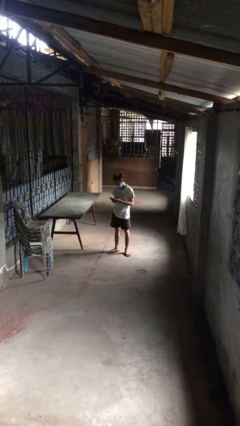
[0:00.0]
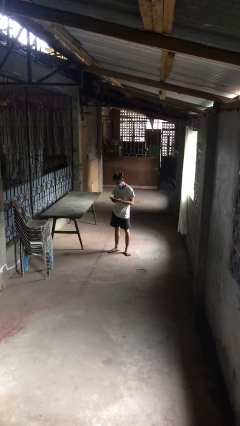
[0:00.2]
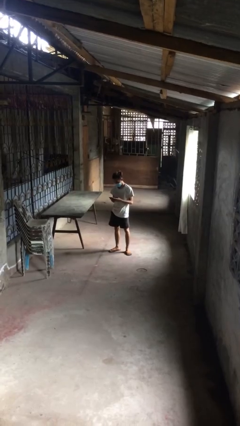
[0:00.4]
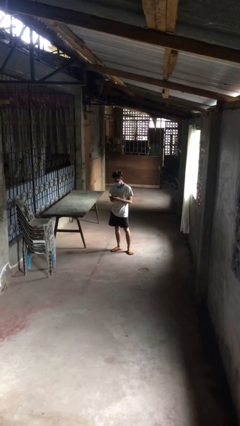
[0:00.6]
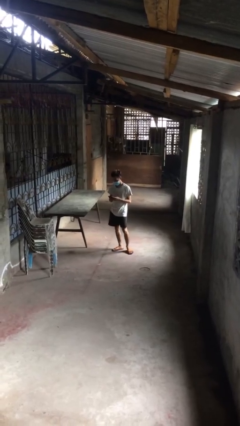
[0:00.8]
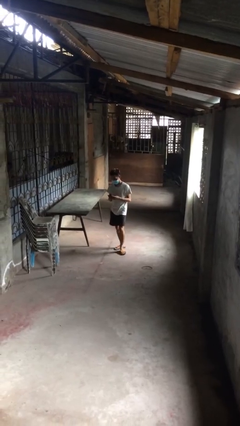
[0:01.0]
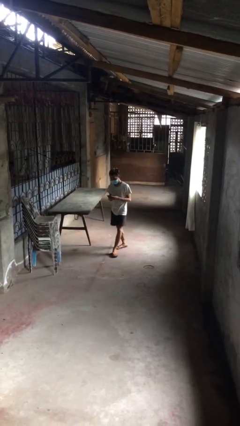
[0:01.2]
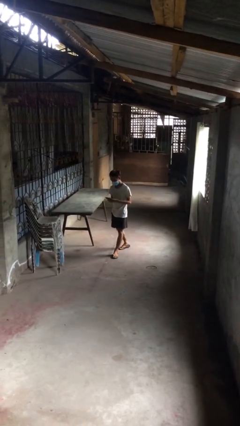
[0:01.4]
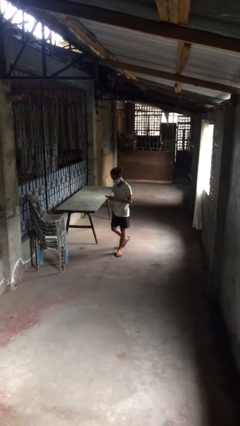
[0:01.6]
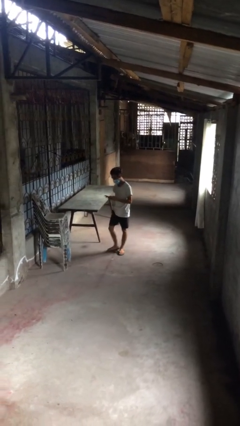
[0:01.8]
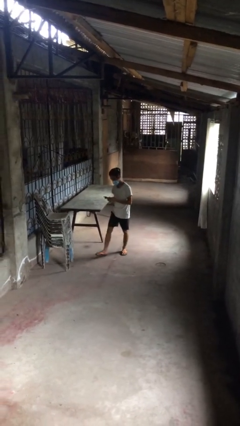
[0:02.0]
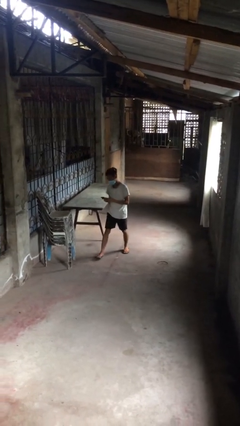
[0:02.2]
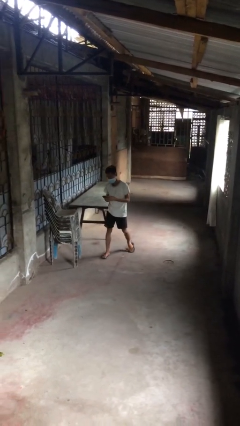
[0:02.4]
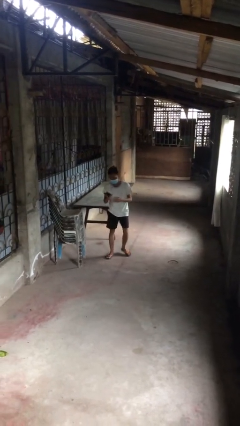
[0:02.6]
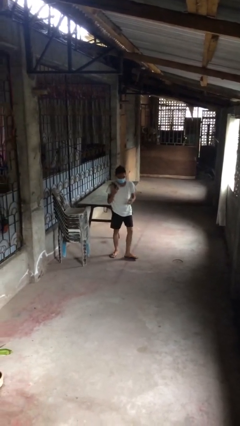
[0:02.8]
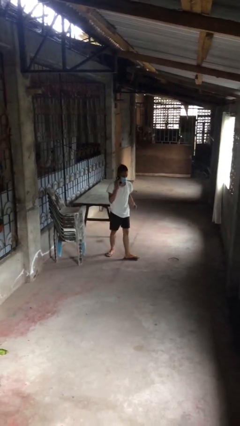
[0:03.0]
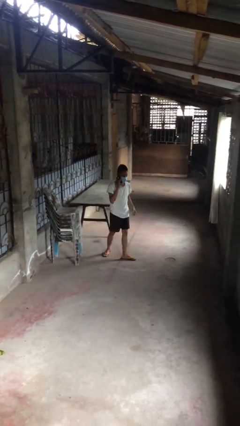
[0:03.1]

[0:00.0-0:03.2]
person texts on phone

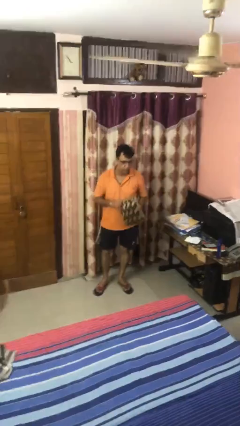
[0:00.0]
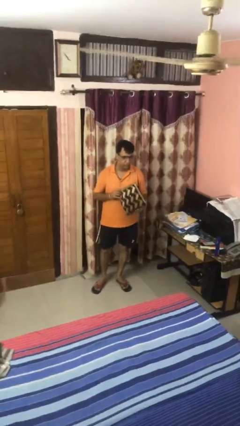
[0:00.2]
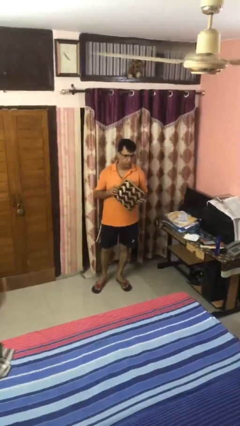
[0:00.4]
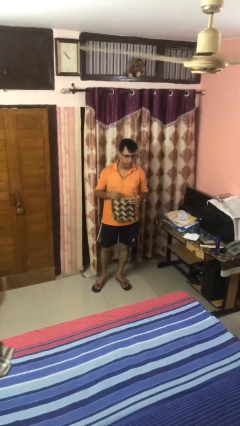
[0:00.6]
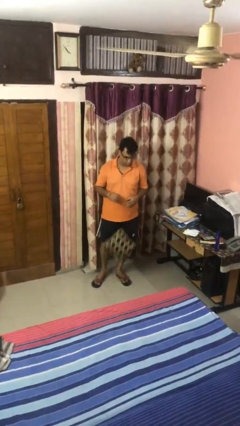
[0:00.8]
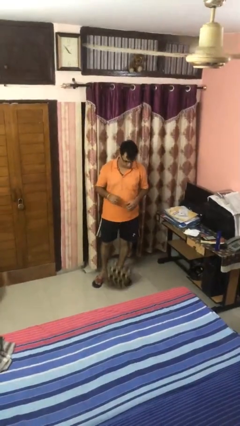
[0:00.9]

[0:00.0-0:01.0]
person drops object

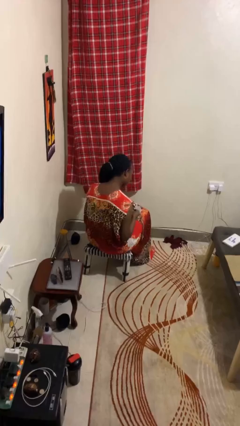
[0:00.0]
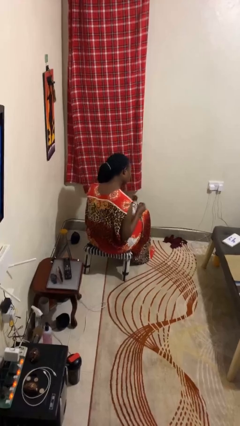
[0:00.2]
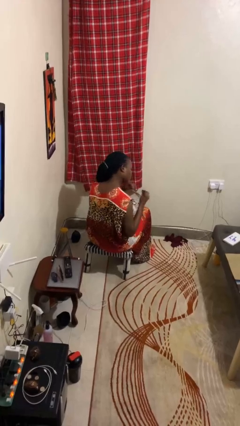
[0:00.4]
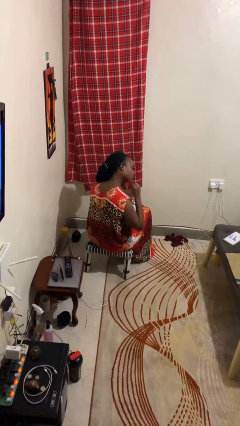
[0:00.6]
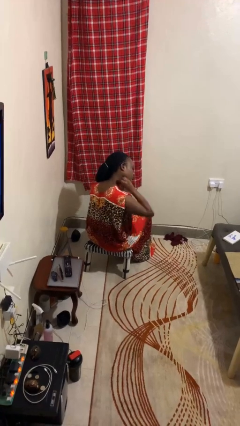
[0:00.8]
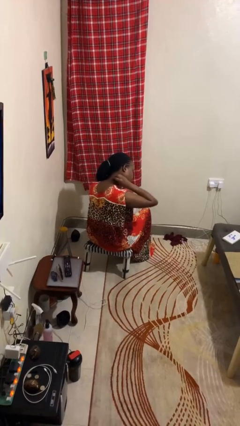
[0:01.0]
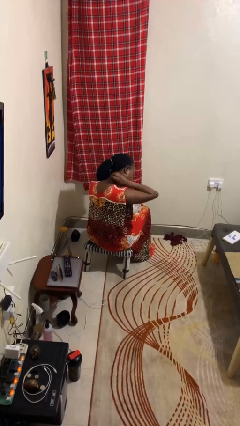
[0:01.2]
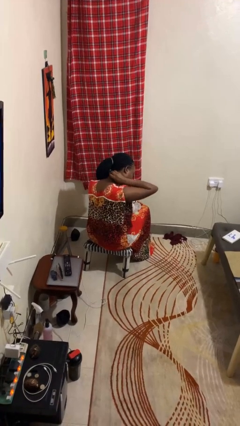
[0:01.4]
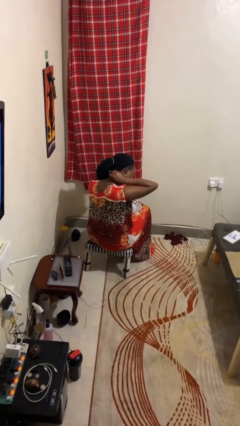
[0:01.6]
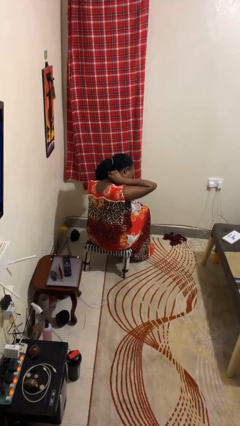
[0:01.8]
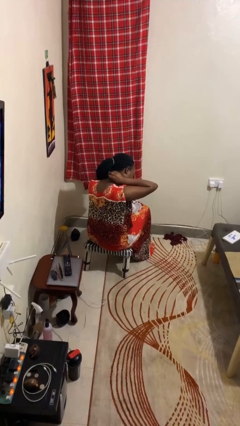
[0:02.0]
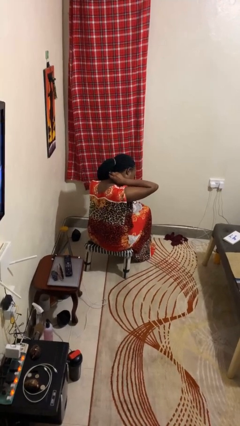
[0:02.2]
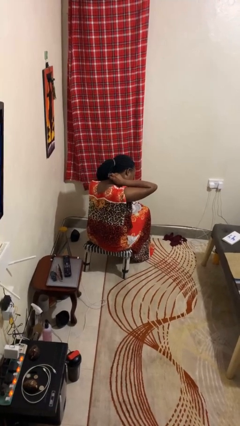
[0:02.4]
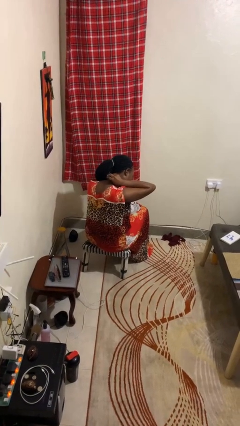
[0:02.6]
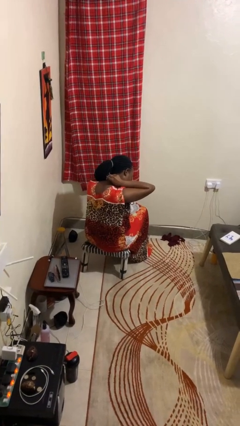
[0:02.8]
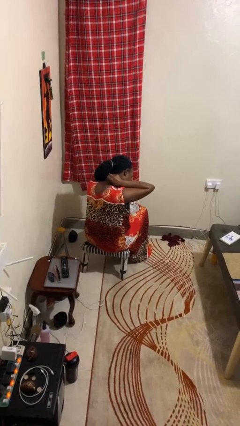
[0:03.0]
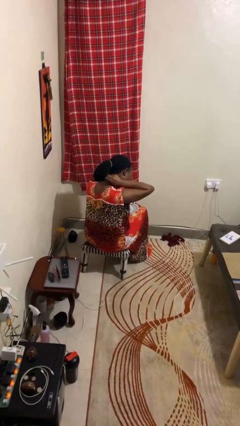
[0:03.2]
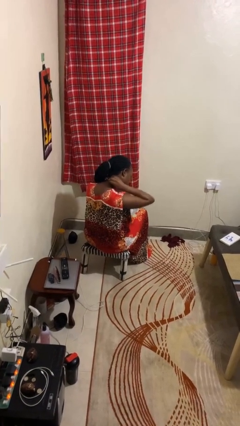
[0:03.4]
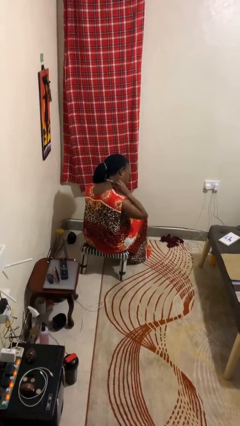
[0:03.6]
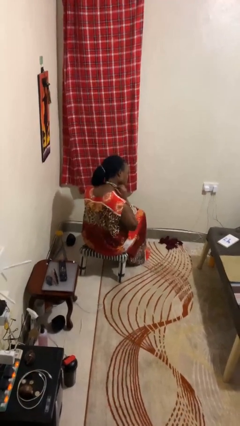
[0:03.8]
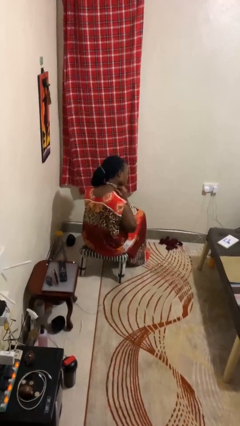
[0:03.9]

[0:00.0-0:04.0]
person puts on necklace

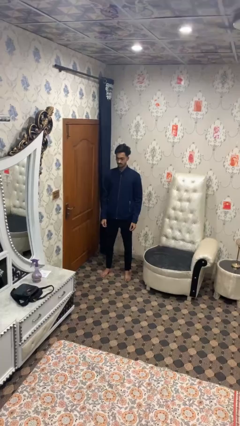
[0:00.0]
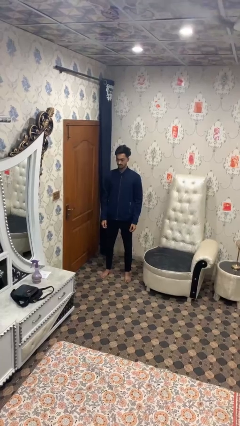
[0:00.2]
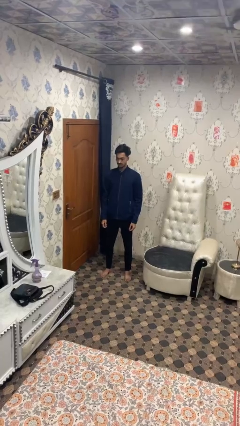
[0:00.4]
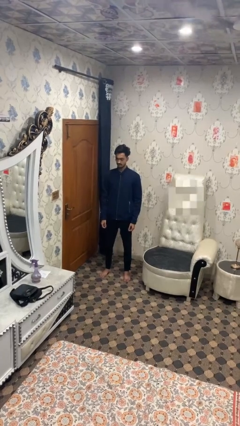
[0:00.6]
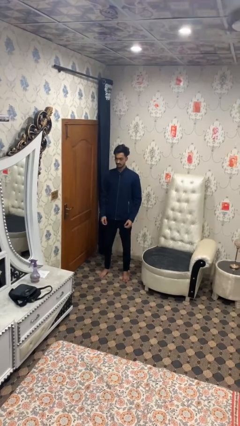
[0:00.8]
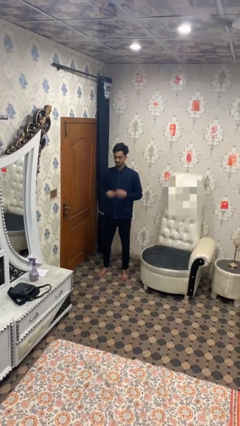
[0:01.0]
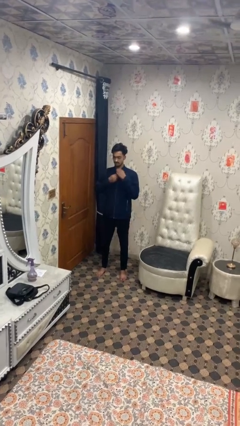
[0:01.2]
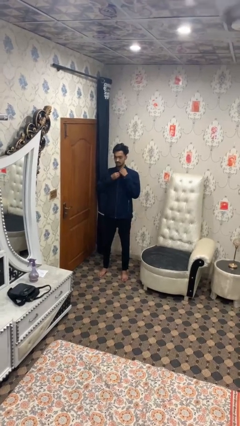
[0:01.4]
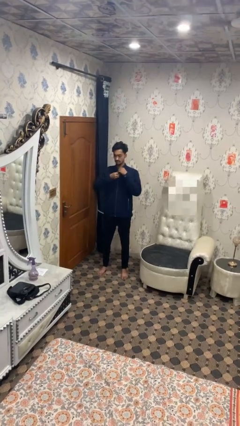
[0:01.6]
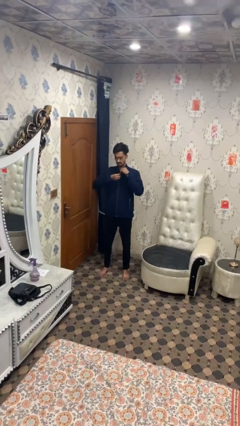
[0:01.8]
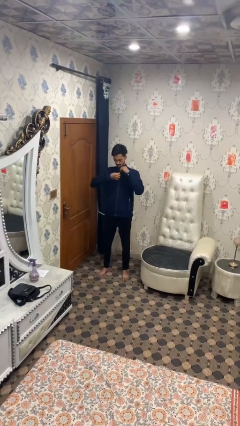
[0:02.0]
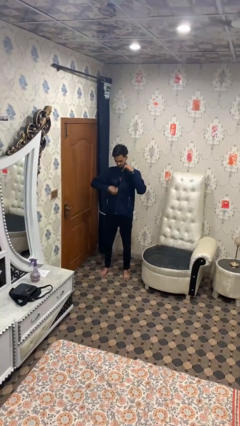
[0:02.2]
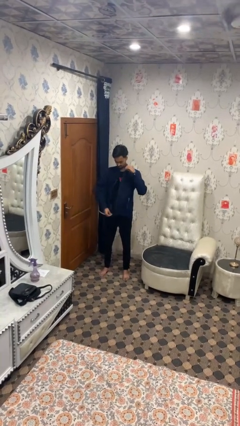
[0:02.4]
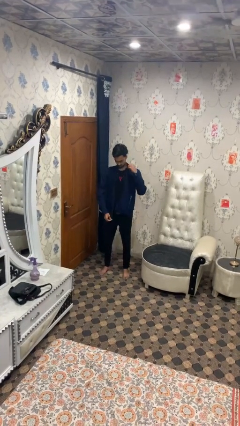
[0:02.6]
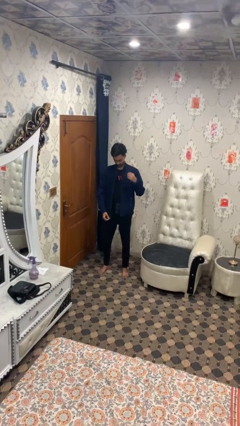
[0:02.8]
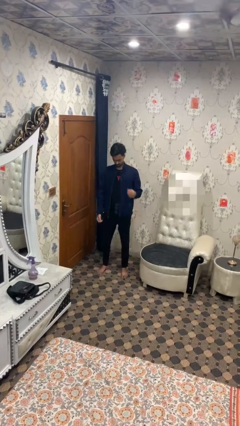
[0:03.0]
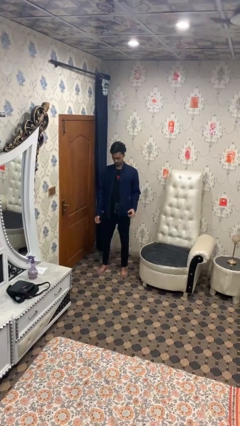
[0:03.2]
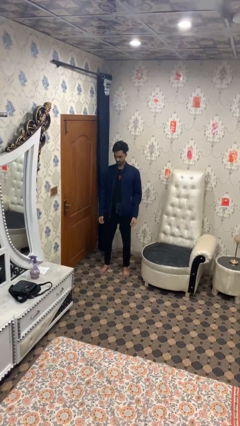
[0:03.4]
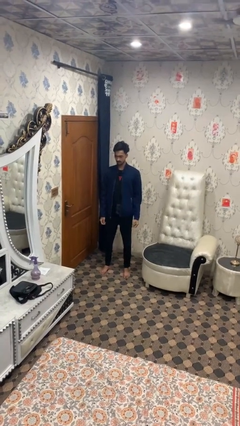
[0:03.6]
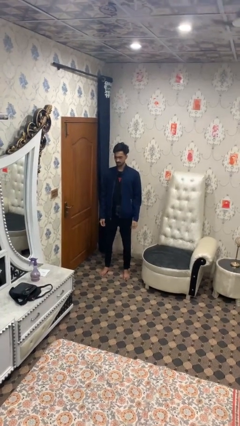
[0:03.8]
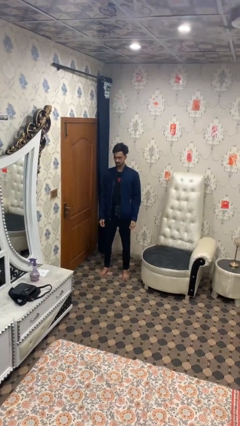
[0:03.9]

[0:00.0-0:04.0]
person unzips jacket

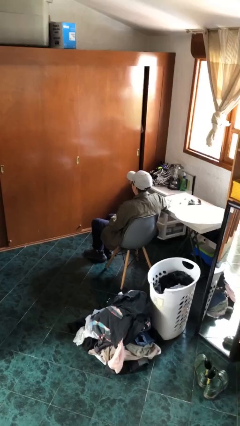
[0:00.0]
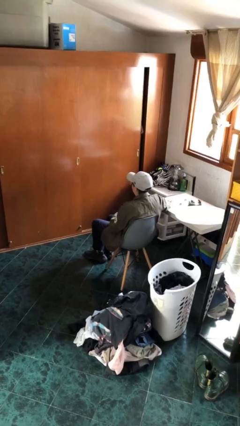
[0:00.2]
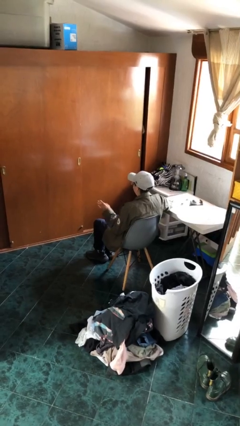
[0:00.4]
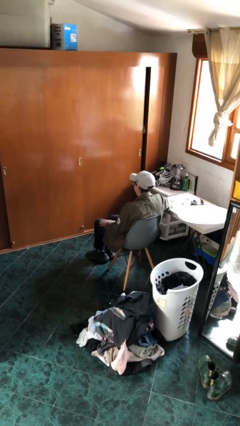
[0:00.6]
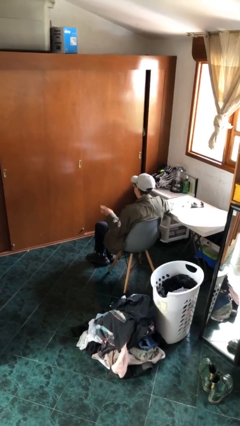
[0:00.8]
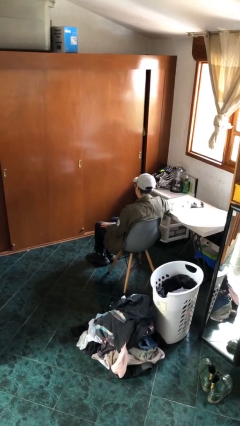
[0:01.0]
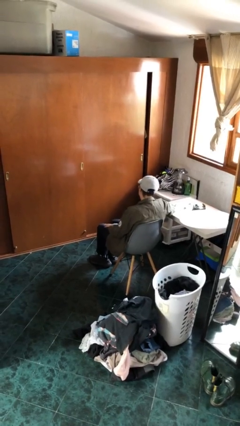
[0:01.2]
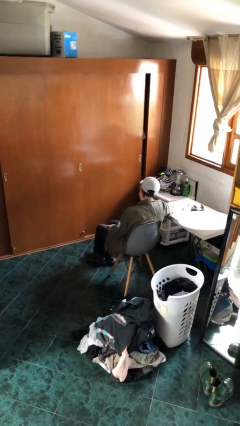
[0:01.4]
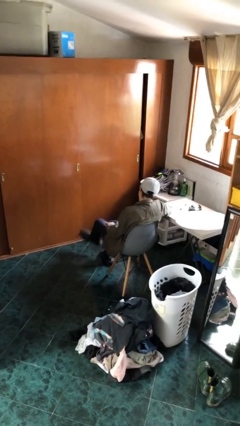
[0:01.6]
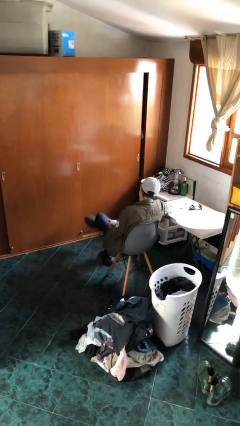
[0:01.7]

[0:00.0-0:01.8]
person slaps hands on thighs

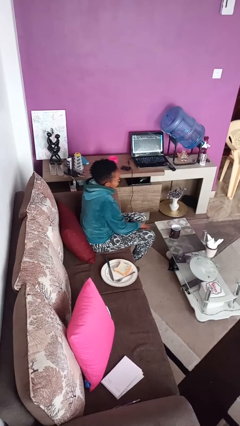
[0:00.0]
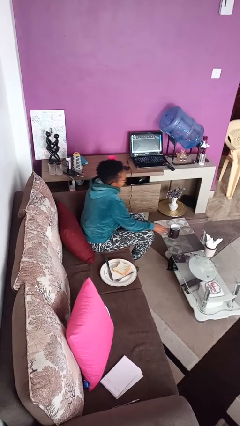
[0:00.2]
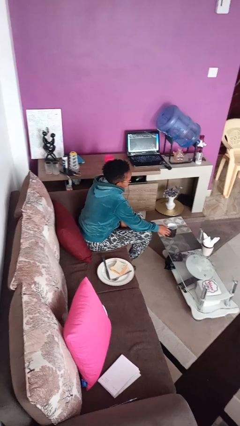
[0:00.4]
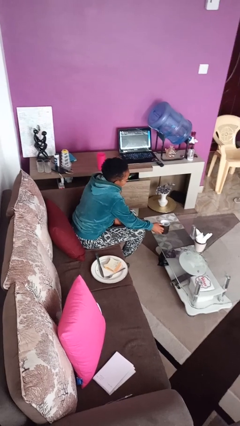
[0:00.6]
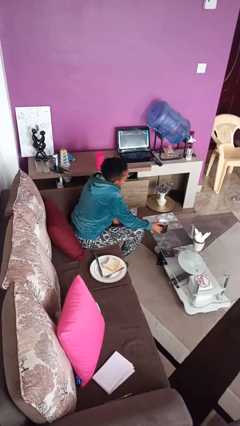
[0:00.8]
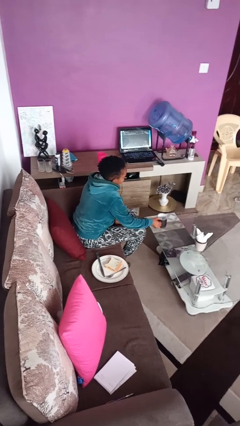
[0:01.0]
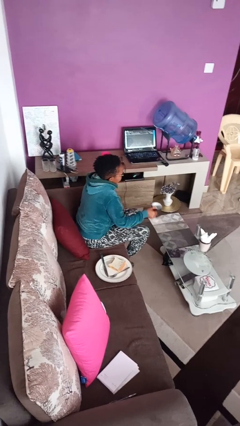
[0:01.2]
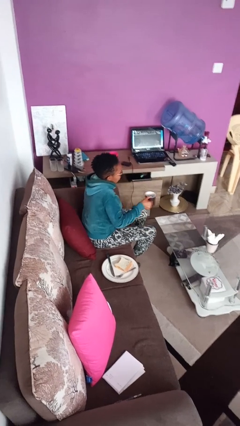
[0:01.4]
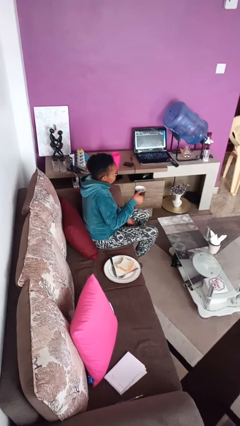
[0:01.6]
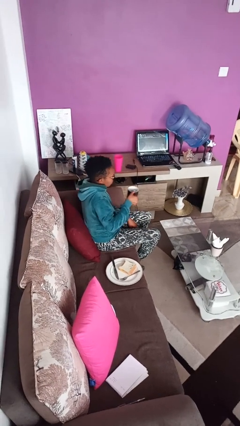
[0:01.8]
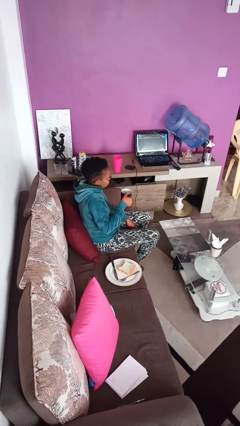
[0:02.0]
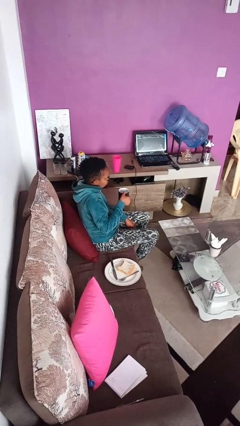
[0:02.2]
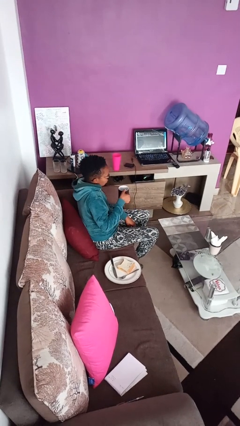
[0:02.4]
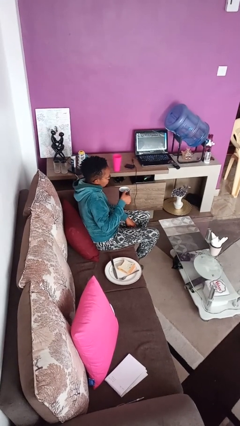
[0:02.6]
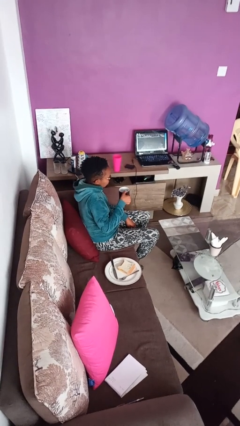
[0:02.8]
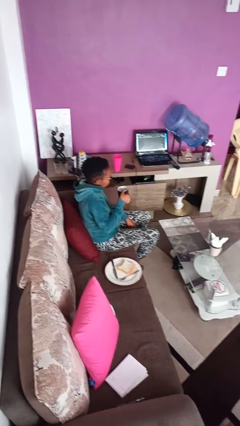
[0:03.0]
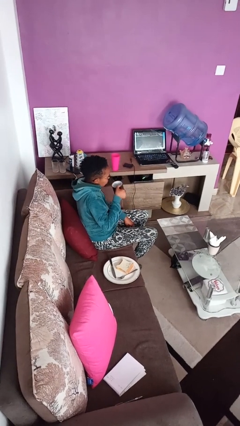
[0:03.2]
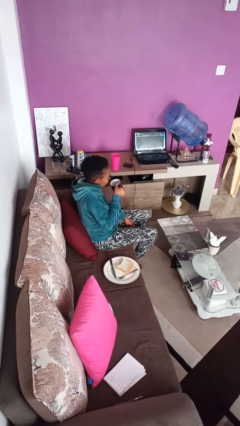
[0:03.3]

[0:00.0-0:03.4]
person picks up object from table
